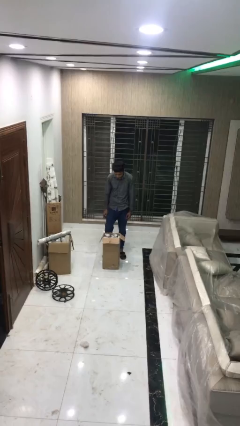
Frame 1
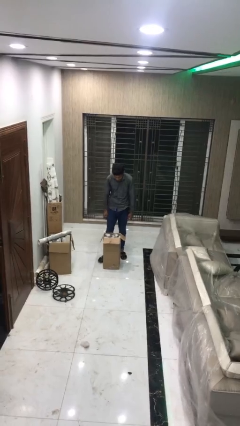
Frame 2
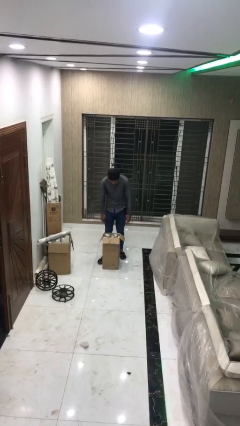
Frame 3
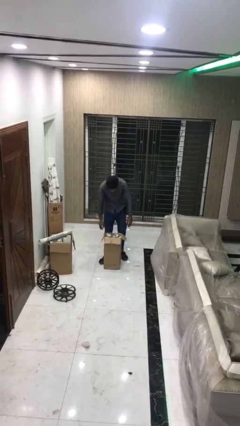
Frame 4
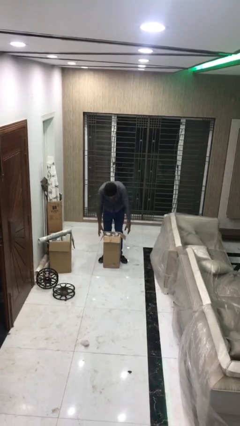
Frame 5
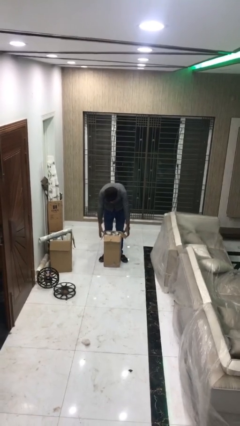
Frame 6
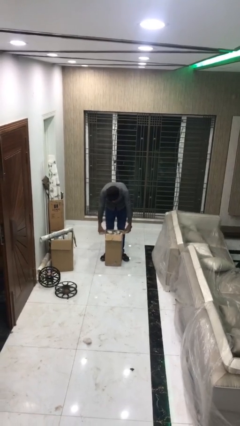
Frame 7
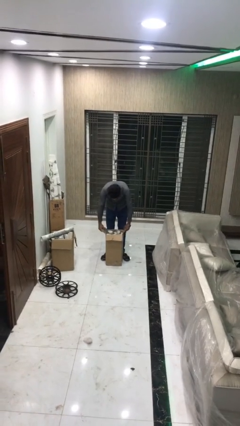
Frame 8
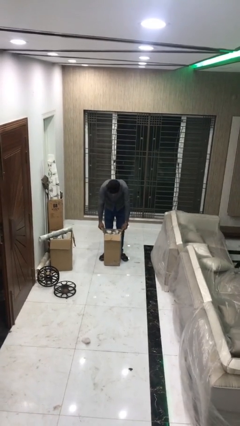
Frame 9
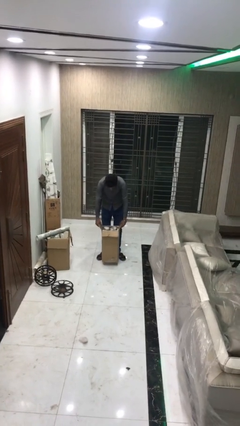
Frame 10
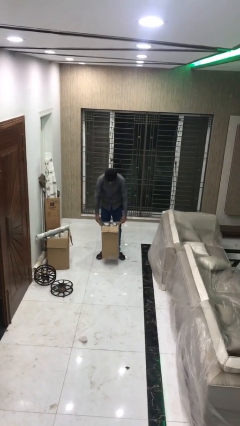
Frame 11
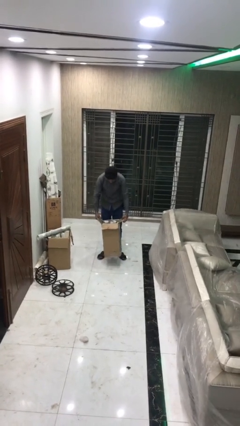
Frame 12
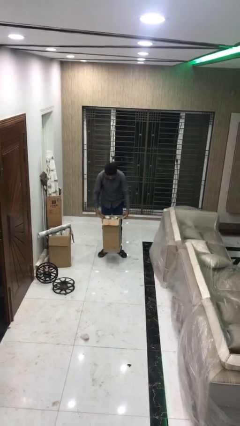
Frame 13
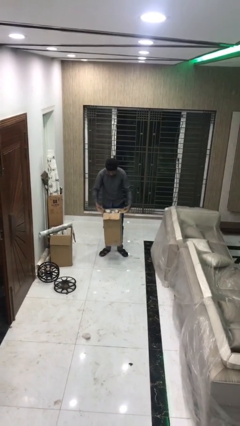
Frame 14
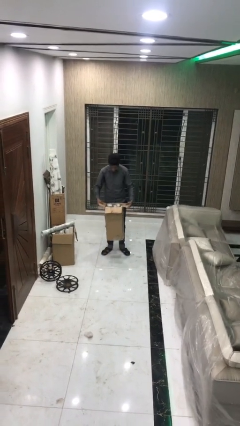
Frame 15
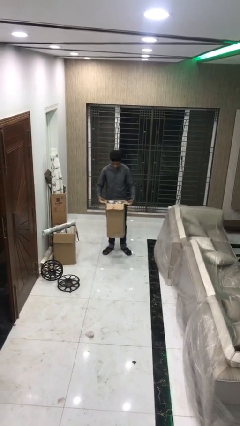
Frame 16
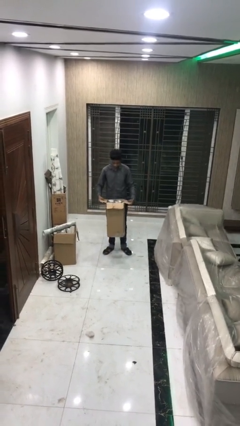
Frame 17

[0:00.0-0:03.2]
person picks up object from floor

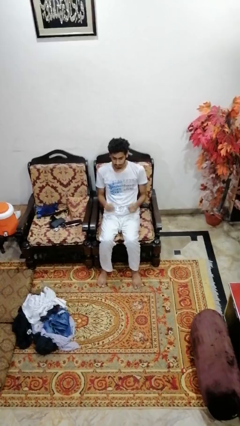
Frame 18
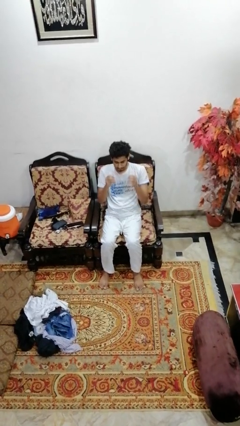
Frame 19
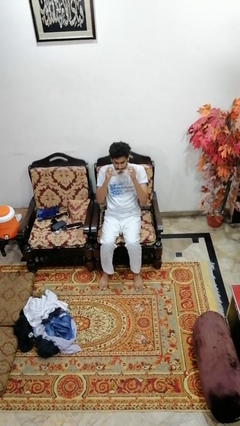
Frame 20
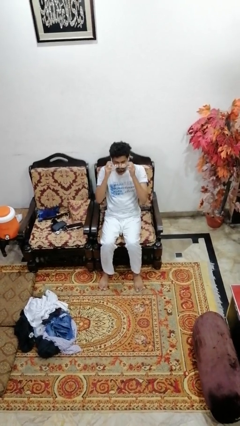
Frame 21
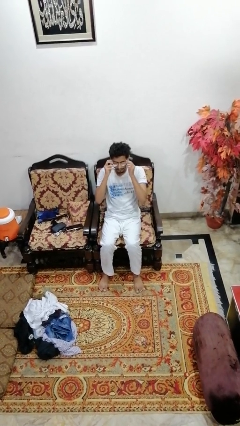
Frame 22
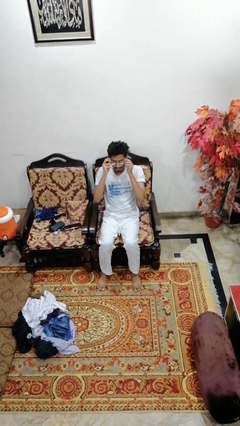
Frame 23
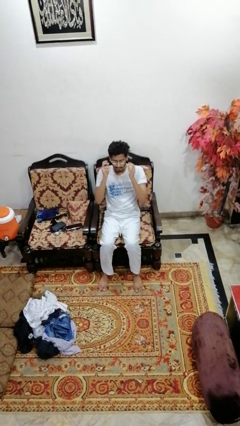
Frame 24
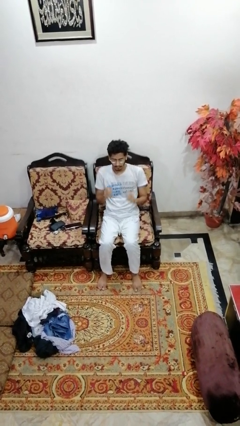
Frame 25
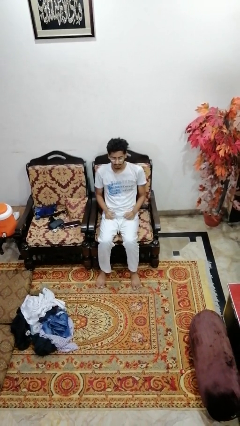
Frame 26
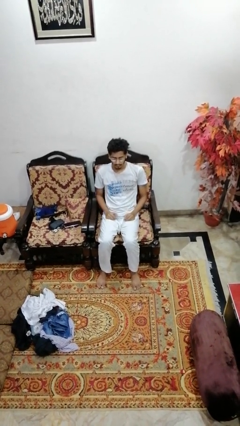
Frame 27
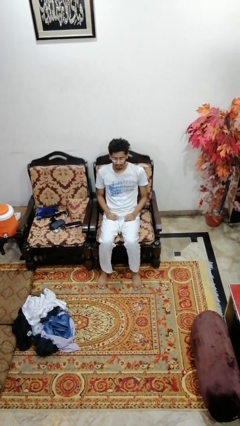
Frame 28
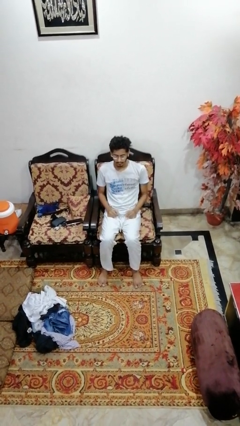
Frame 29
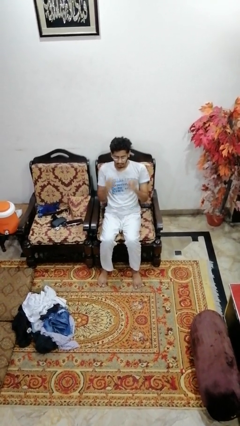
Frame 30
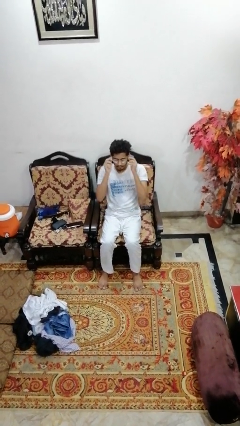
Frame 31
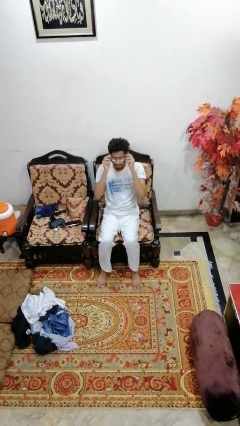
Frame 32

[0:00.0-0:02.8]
person puts on glasses

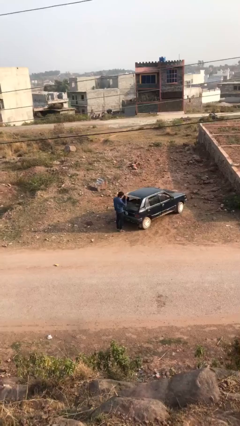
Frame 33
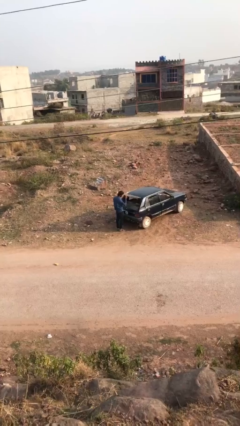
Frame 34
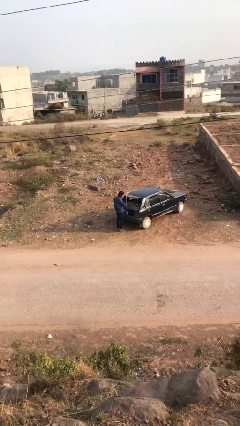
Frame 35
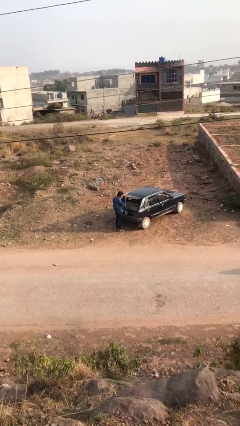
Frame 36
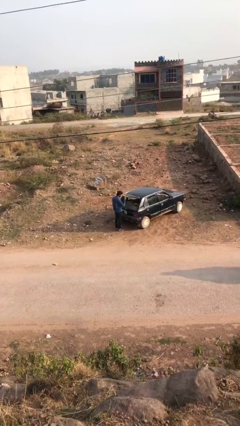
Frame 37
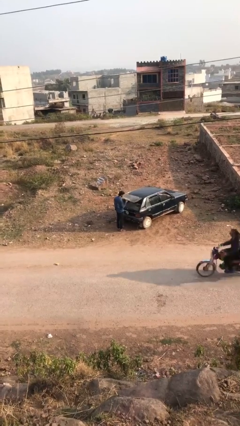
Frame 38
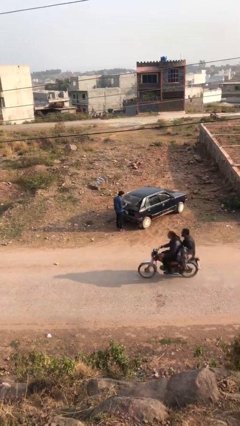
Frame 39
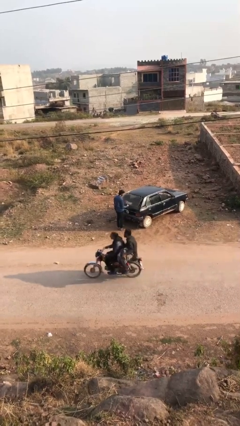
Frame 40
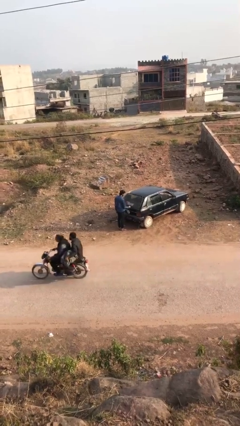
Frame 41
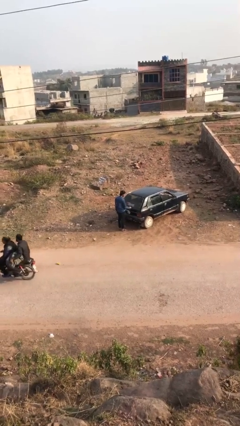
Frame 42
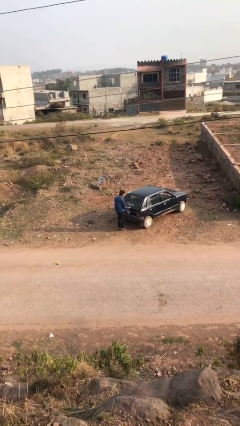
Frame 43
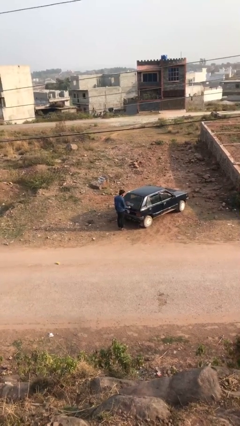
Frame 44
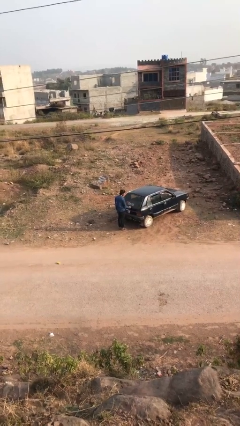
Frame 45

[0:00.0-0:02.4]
person closes car trunk

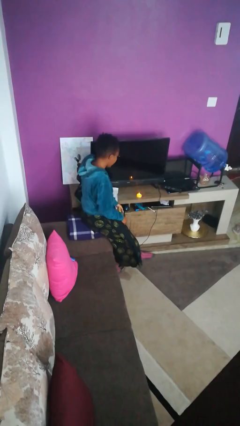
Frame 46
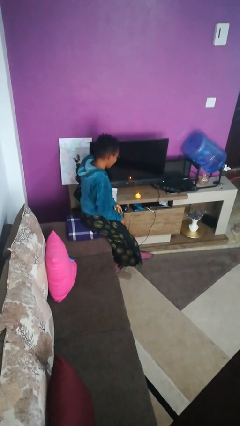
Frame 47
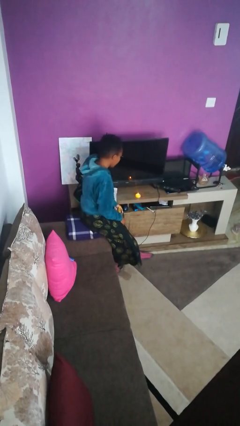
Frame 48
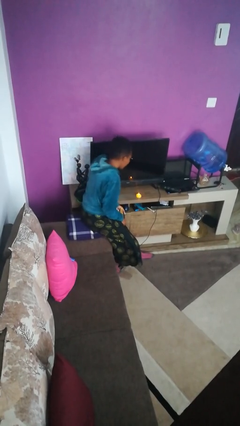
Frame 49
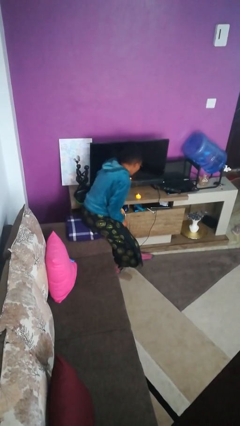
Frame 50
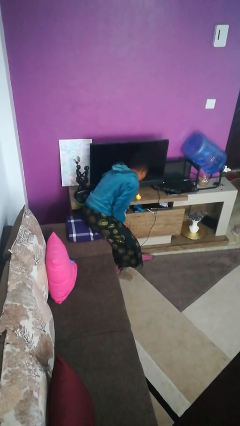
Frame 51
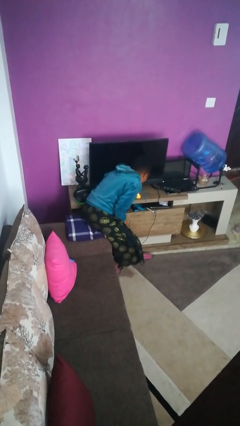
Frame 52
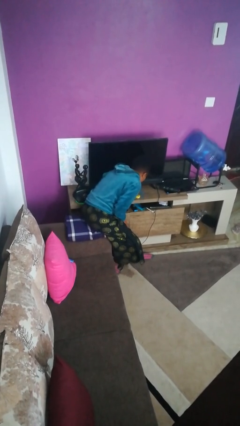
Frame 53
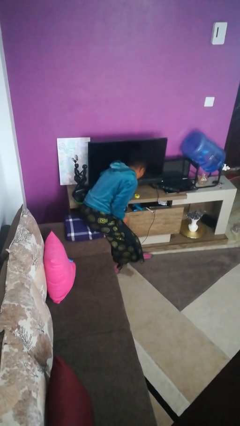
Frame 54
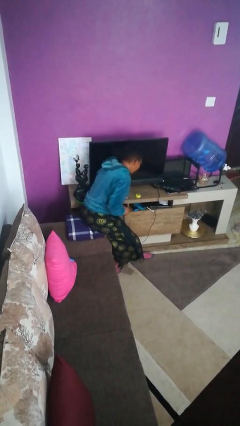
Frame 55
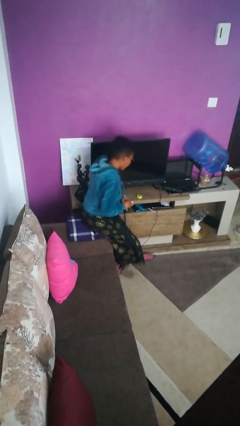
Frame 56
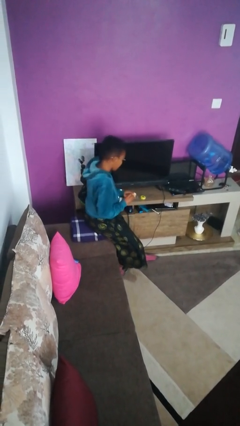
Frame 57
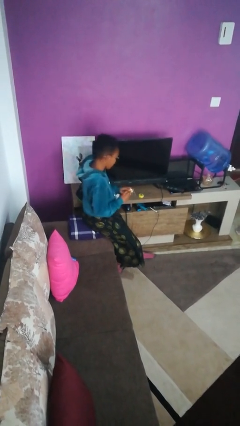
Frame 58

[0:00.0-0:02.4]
person extinguishes candle

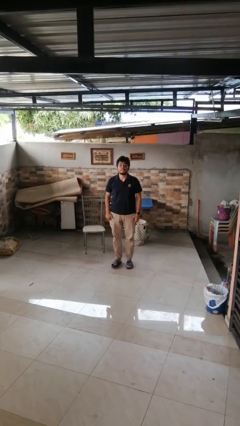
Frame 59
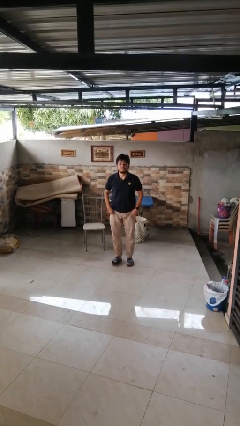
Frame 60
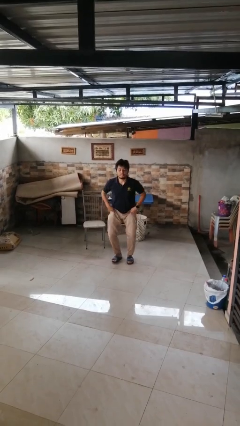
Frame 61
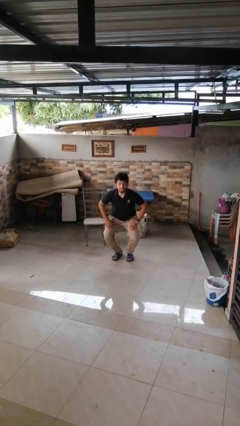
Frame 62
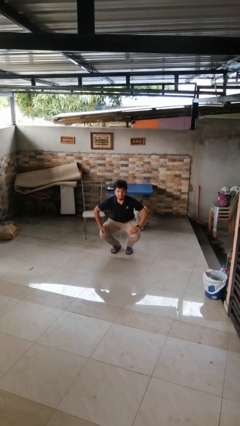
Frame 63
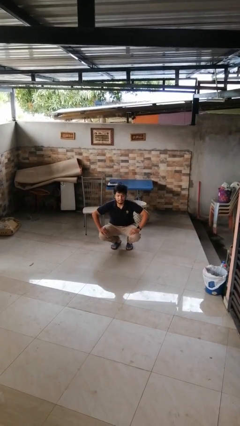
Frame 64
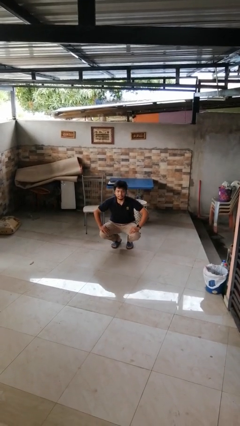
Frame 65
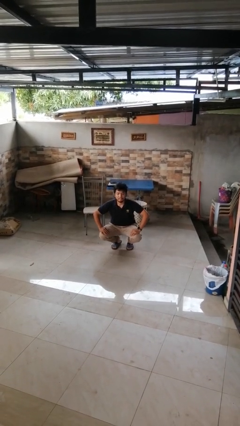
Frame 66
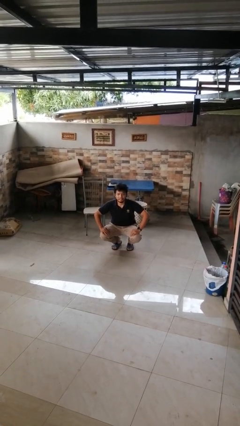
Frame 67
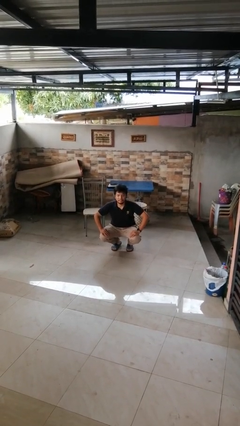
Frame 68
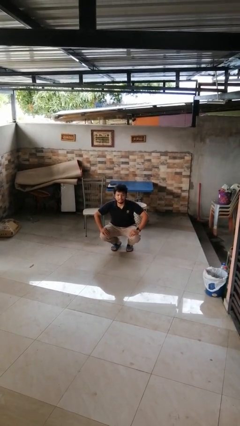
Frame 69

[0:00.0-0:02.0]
person squats

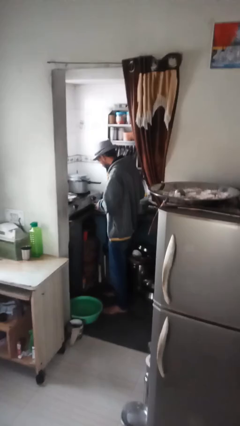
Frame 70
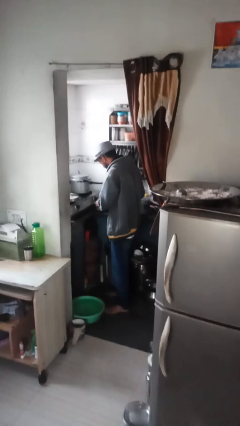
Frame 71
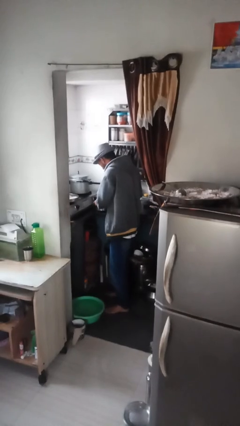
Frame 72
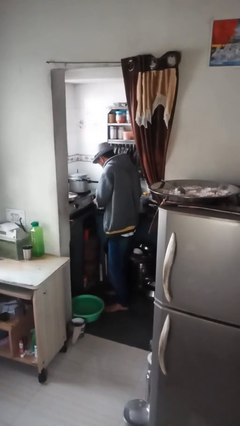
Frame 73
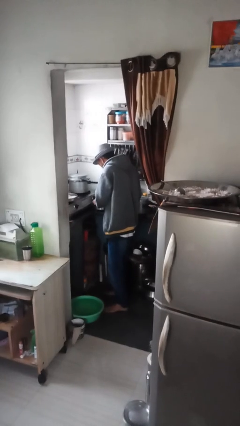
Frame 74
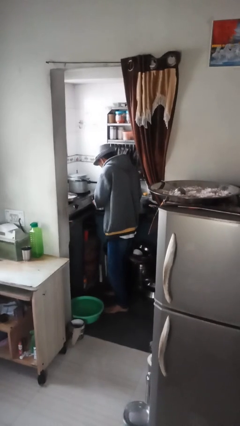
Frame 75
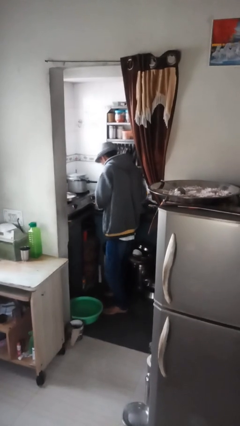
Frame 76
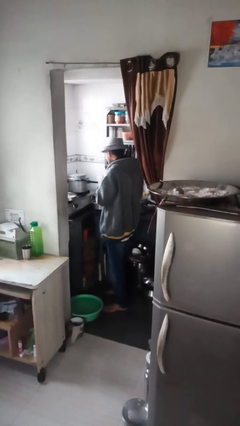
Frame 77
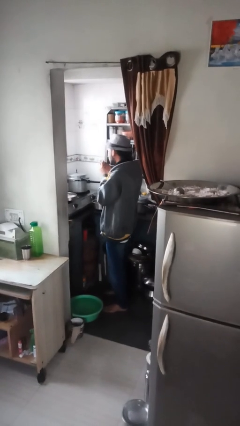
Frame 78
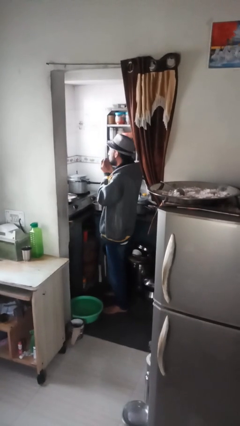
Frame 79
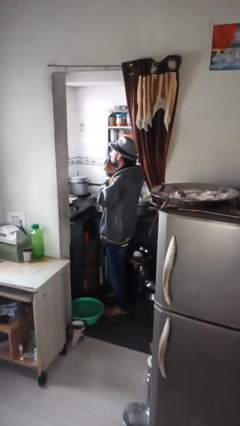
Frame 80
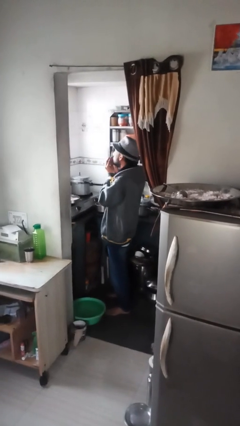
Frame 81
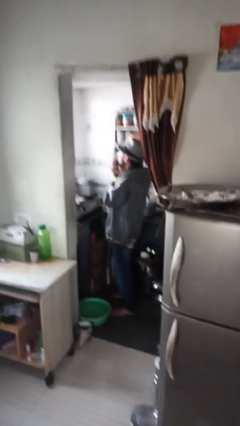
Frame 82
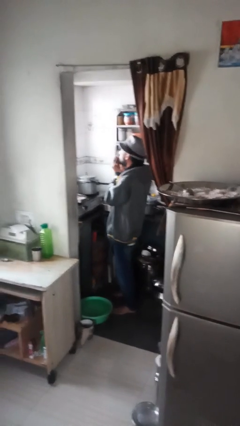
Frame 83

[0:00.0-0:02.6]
person burns hand

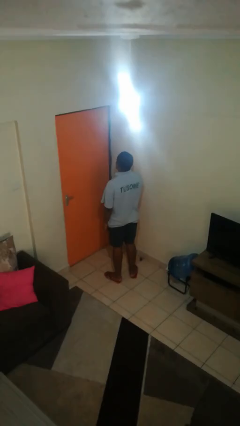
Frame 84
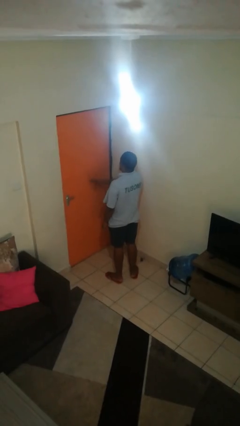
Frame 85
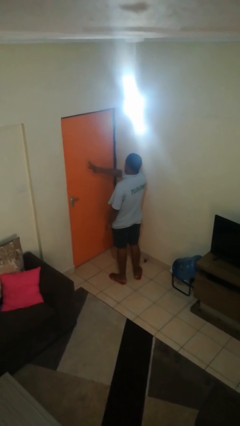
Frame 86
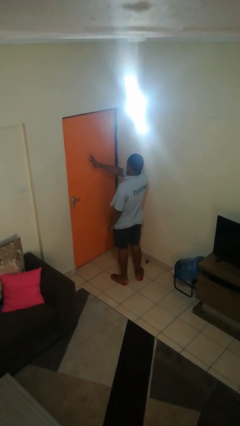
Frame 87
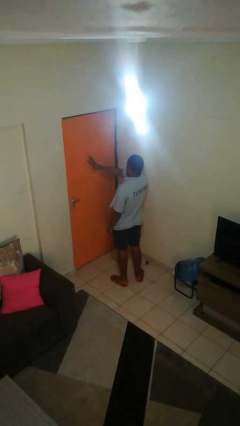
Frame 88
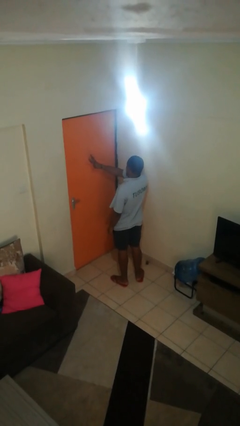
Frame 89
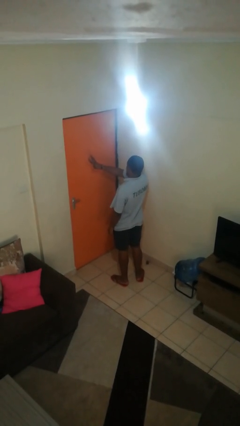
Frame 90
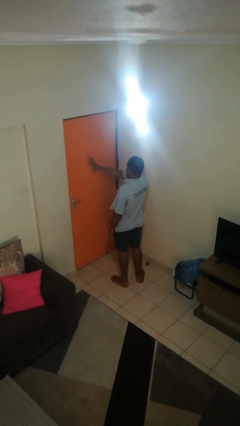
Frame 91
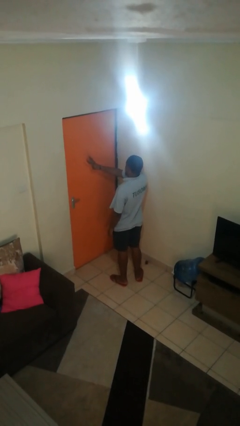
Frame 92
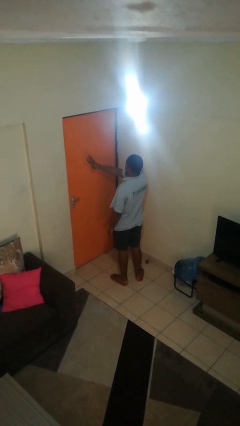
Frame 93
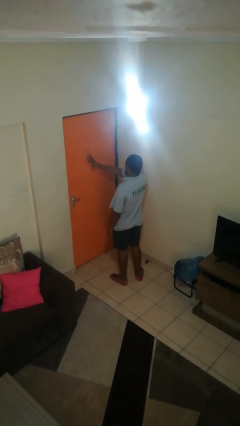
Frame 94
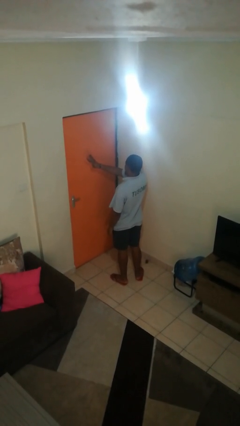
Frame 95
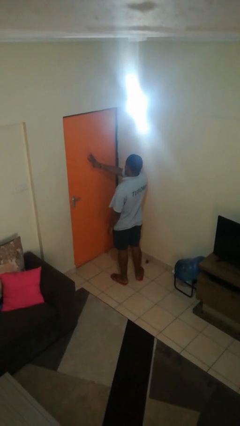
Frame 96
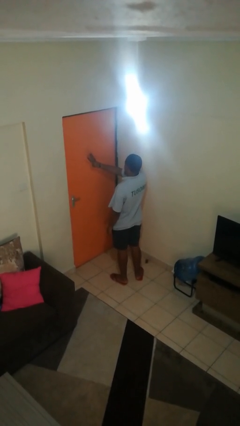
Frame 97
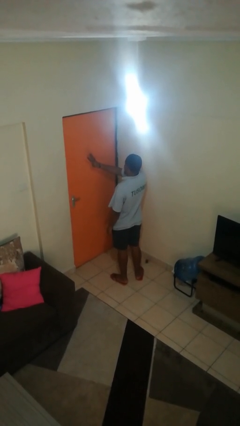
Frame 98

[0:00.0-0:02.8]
person gestures number three
